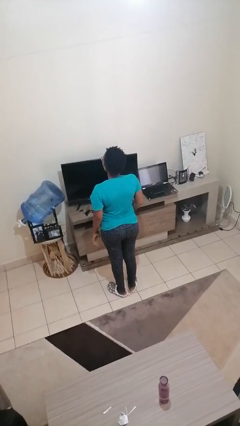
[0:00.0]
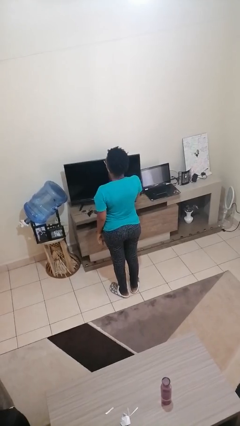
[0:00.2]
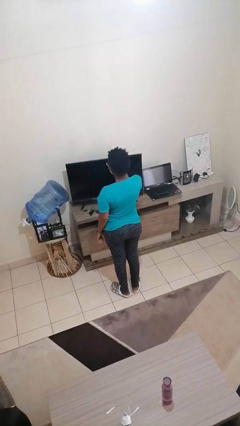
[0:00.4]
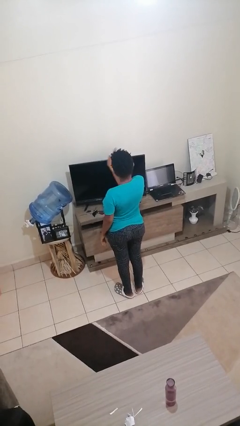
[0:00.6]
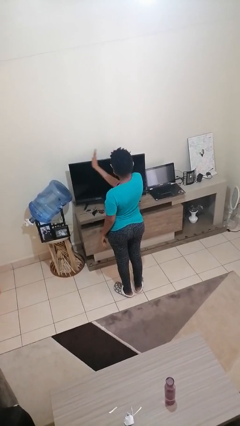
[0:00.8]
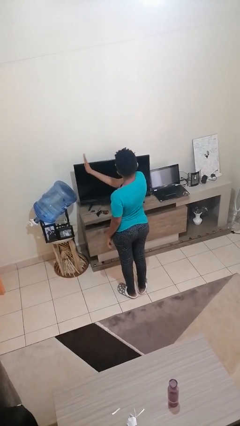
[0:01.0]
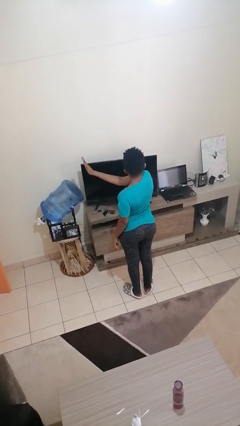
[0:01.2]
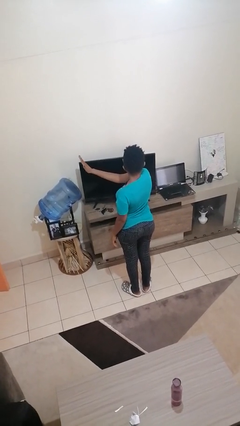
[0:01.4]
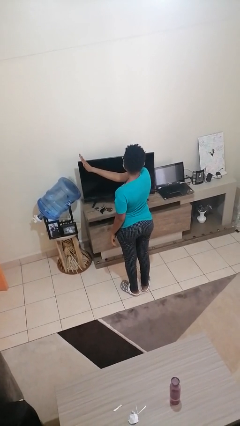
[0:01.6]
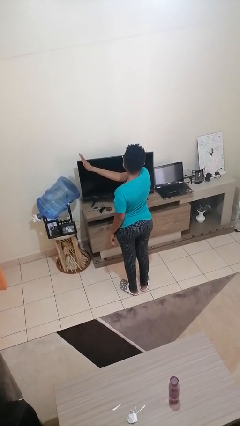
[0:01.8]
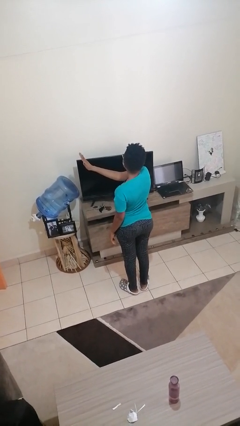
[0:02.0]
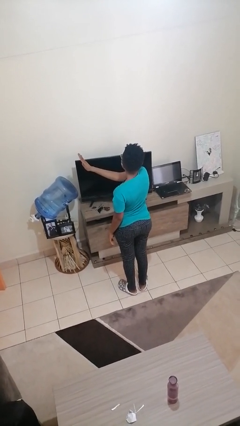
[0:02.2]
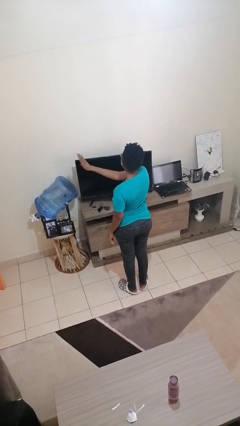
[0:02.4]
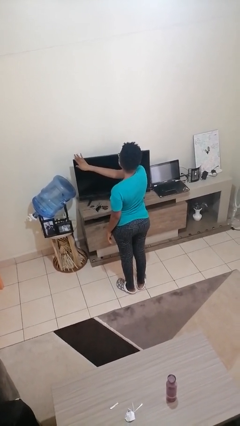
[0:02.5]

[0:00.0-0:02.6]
person gestures swipe left

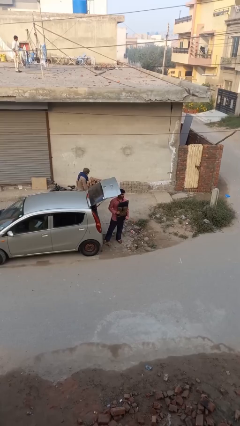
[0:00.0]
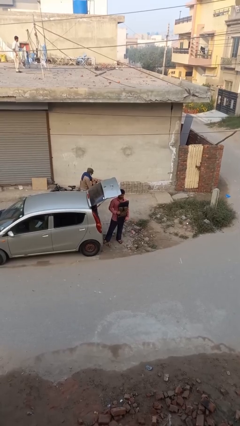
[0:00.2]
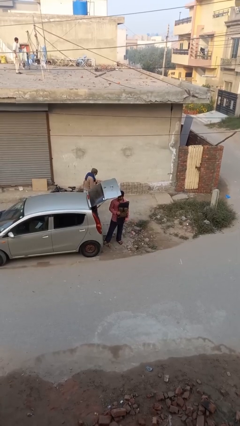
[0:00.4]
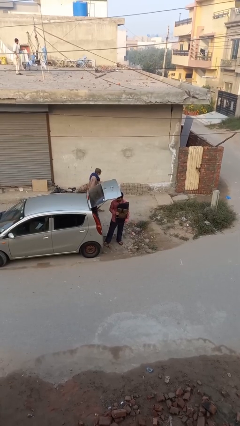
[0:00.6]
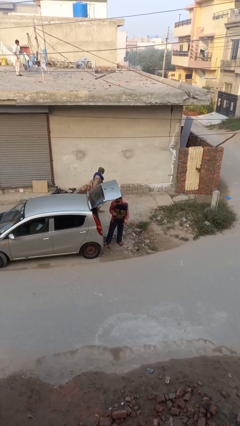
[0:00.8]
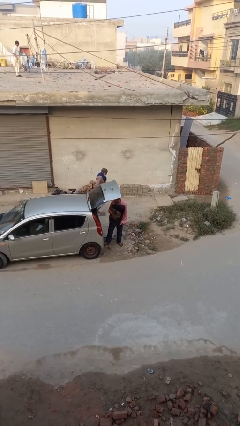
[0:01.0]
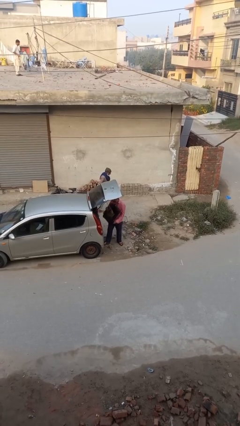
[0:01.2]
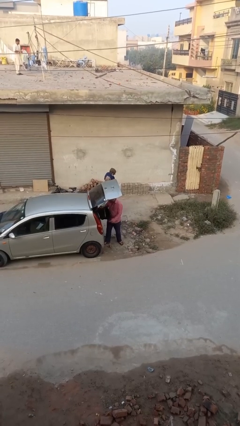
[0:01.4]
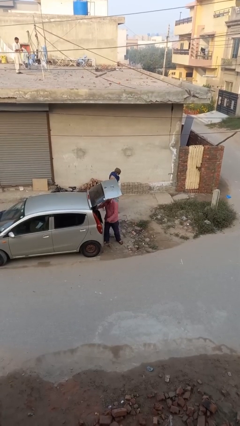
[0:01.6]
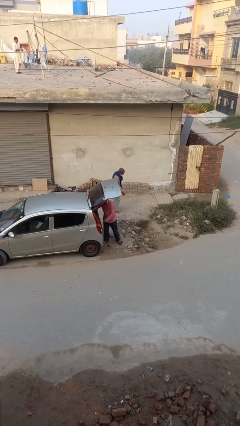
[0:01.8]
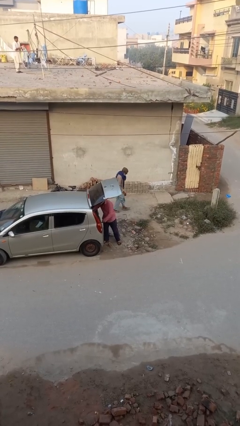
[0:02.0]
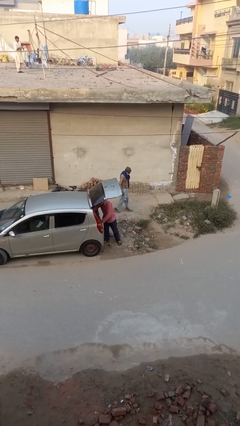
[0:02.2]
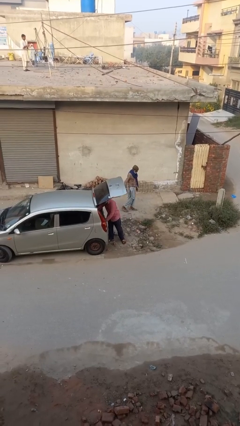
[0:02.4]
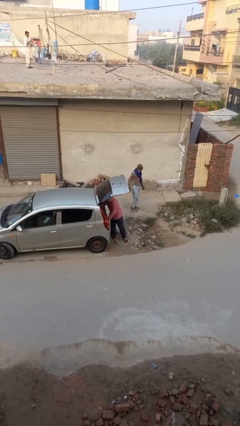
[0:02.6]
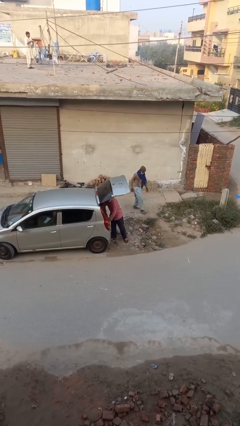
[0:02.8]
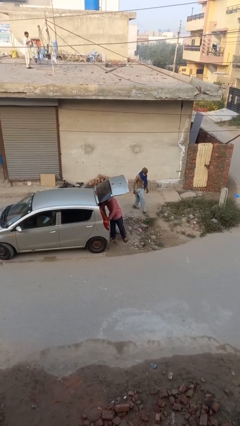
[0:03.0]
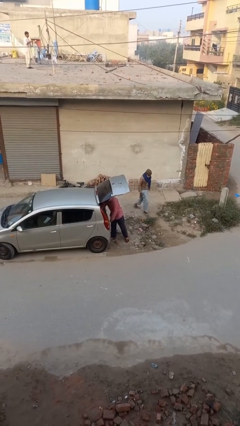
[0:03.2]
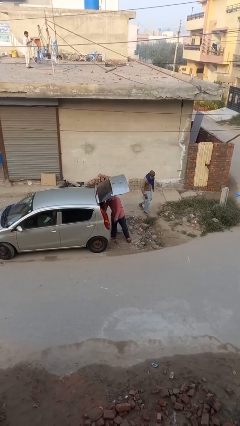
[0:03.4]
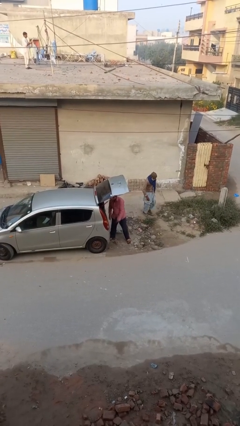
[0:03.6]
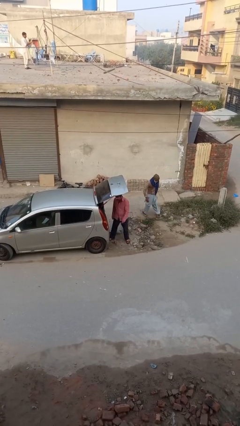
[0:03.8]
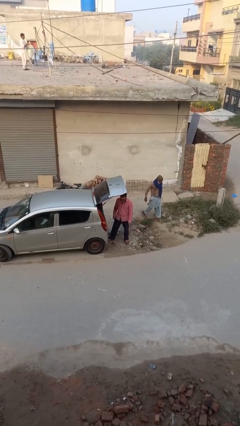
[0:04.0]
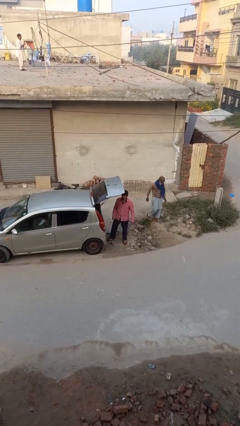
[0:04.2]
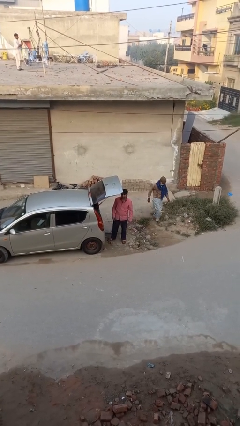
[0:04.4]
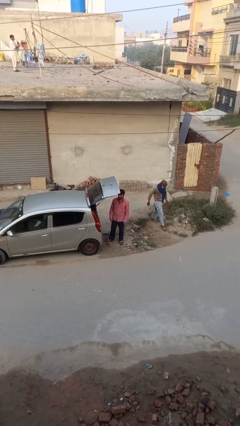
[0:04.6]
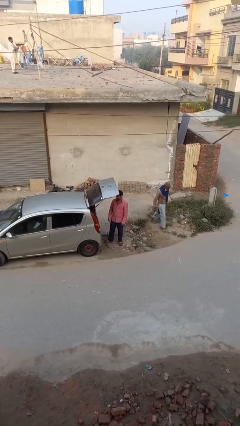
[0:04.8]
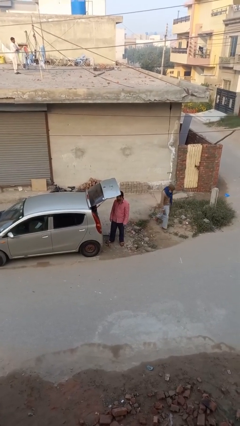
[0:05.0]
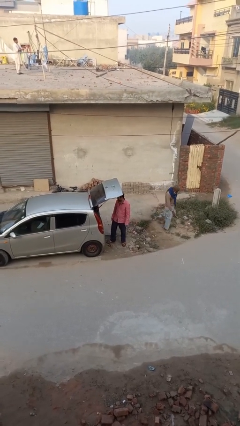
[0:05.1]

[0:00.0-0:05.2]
person loads car

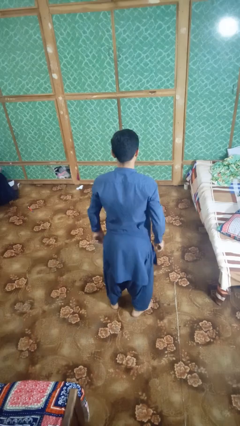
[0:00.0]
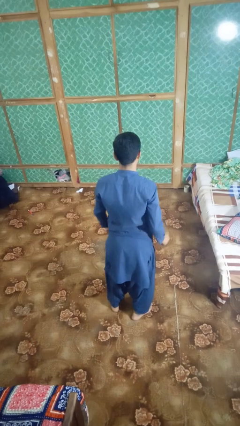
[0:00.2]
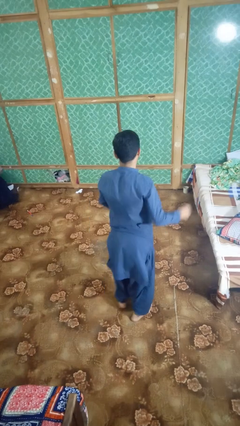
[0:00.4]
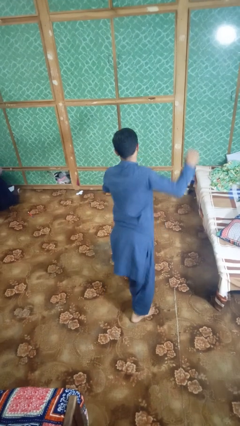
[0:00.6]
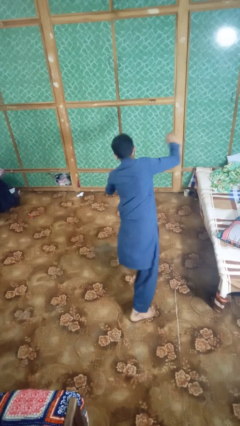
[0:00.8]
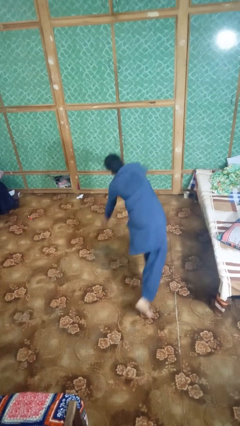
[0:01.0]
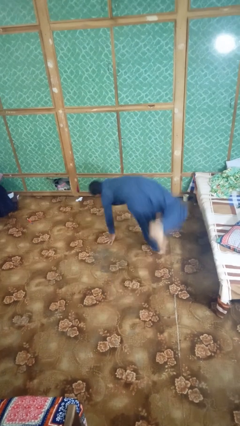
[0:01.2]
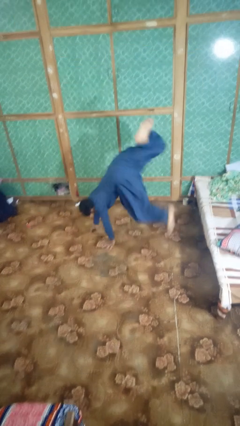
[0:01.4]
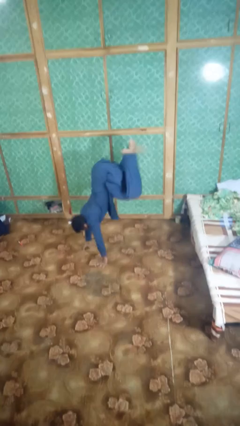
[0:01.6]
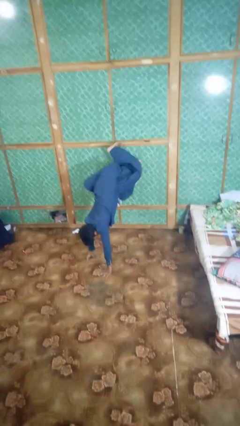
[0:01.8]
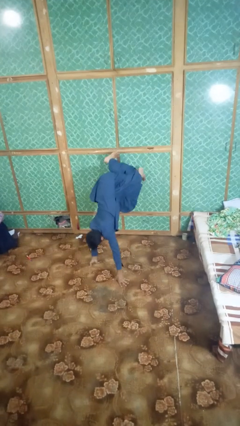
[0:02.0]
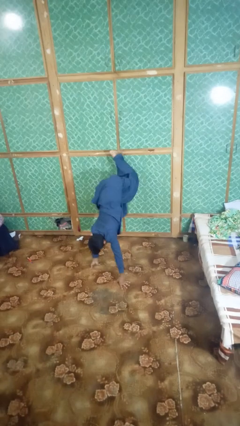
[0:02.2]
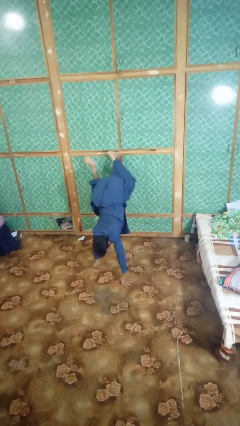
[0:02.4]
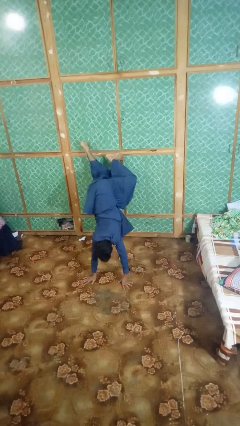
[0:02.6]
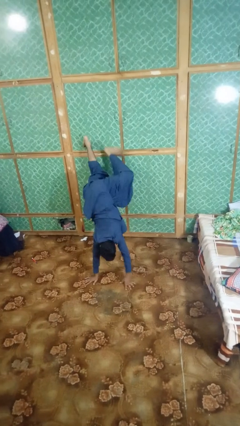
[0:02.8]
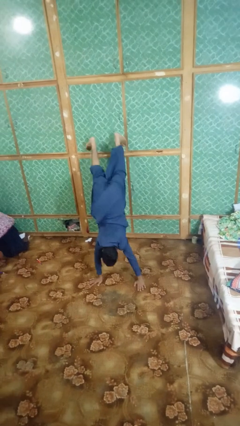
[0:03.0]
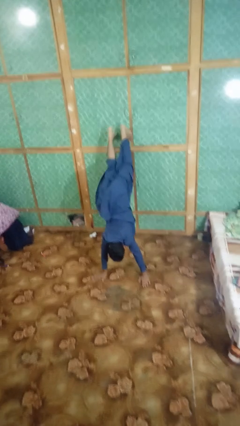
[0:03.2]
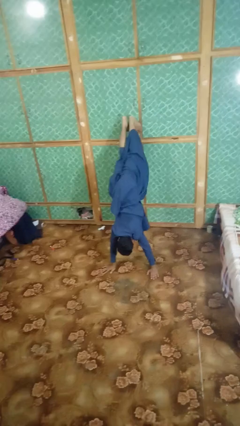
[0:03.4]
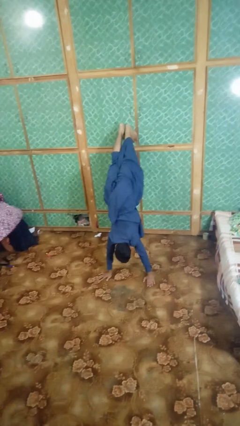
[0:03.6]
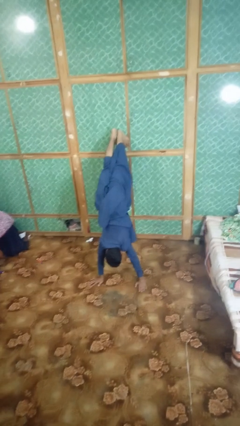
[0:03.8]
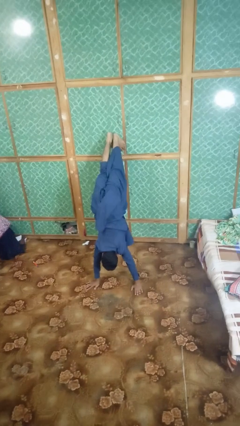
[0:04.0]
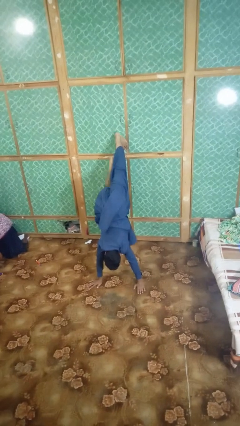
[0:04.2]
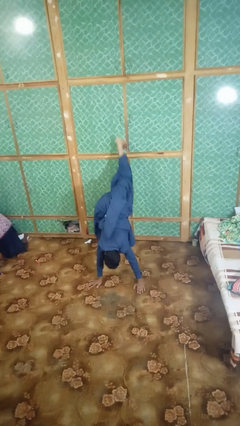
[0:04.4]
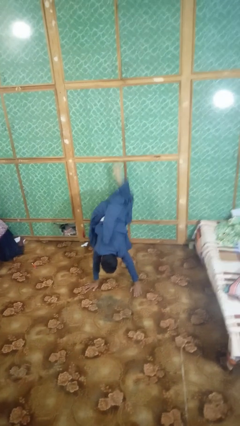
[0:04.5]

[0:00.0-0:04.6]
person handstand

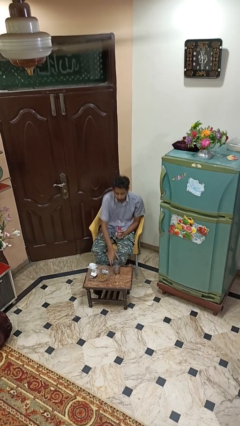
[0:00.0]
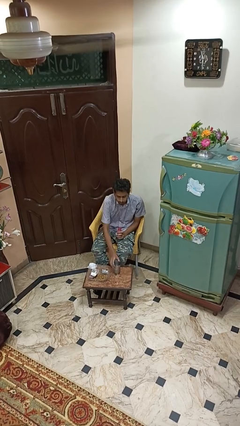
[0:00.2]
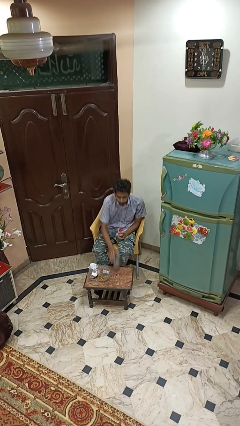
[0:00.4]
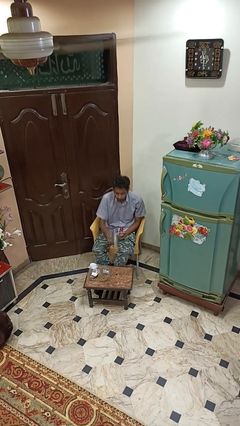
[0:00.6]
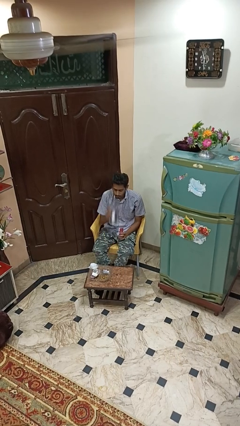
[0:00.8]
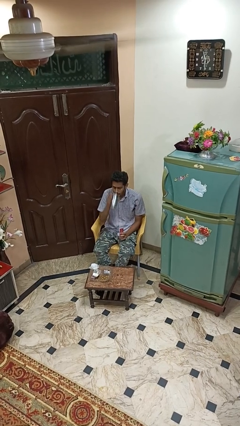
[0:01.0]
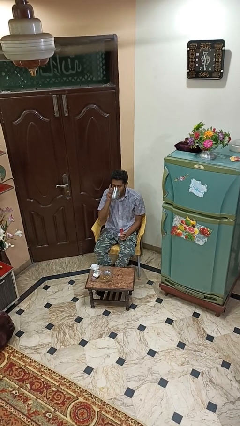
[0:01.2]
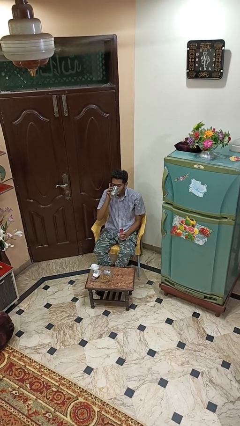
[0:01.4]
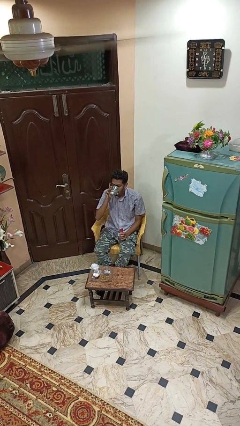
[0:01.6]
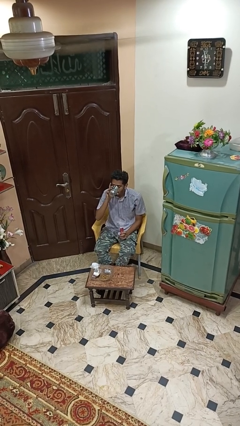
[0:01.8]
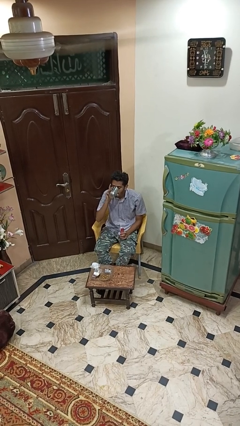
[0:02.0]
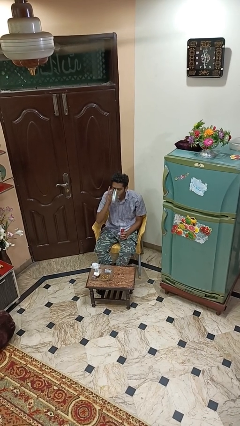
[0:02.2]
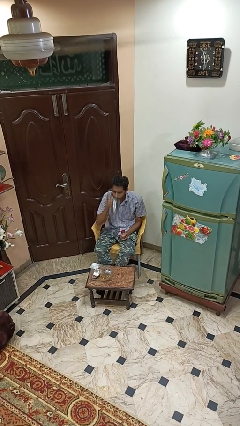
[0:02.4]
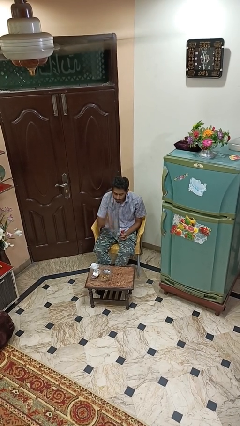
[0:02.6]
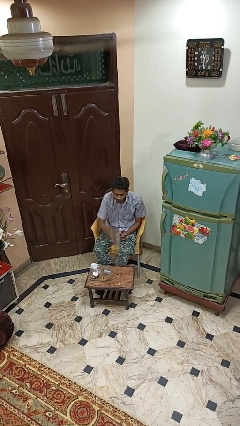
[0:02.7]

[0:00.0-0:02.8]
person drinks from cup

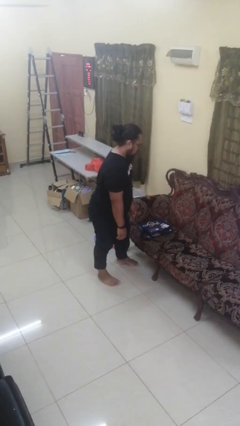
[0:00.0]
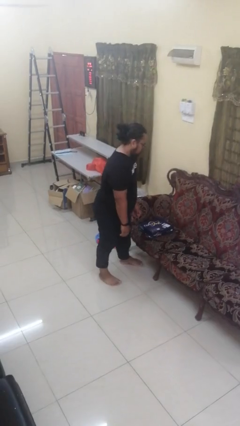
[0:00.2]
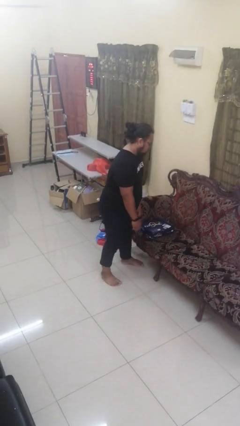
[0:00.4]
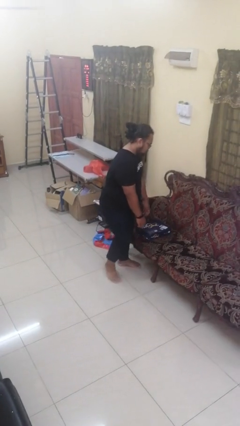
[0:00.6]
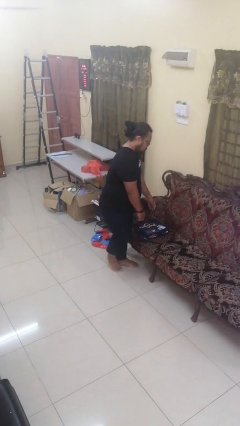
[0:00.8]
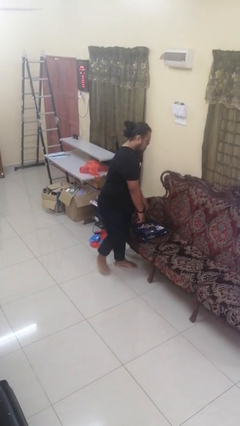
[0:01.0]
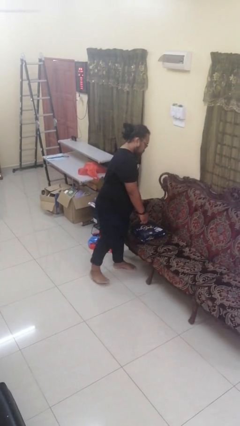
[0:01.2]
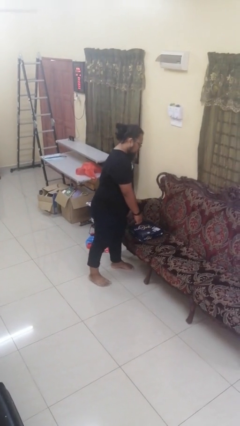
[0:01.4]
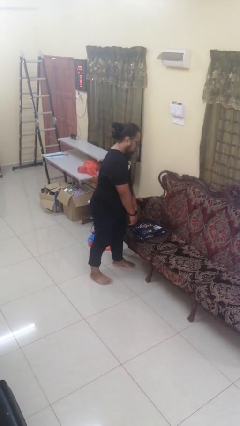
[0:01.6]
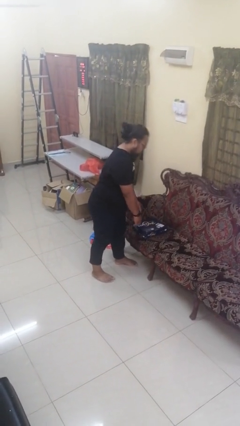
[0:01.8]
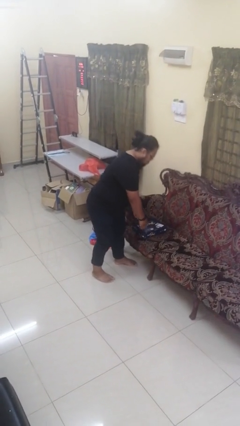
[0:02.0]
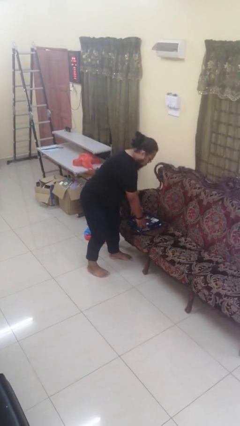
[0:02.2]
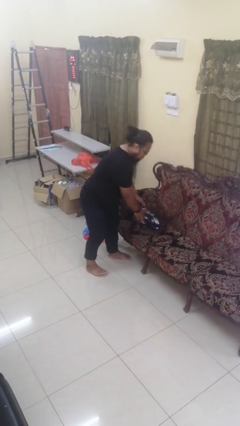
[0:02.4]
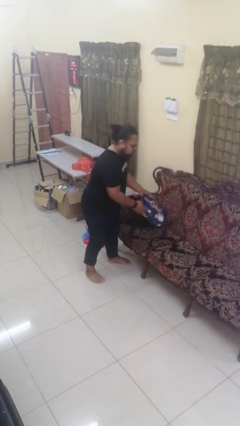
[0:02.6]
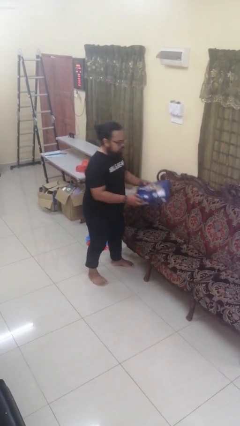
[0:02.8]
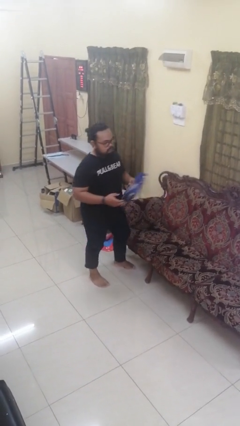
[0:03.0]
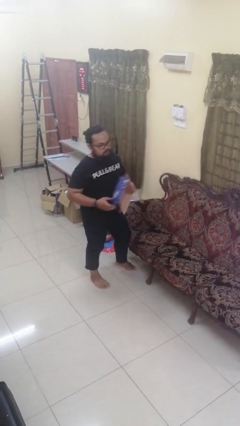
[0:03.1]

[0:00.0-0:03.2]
person picks up object from couch
